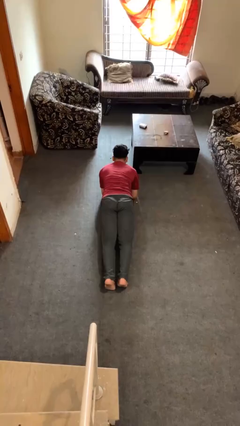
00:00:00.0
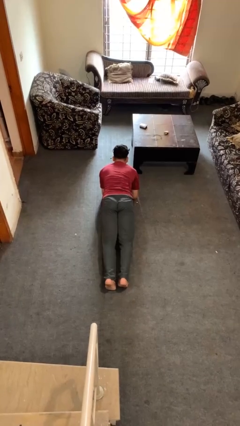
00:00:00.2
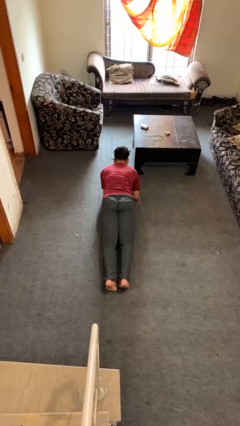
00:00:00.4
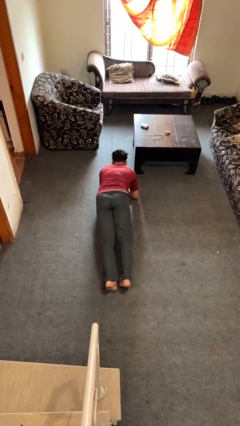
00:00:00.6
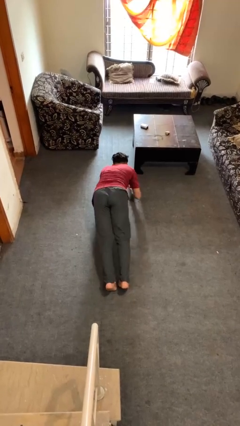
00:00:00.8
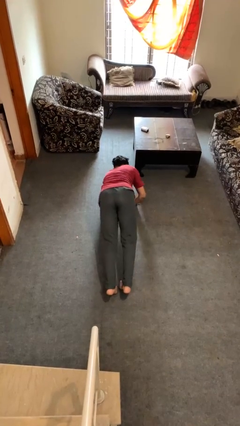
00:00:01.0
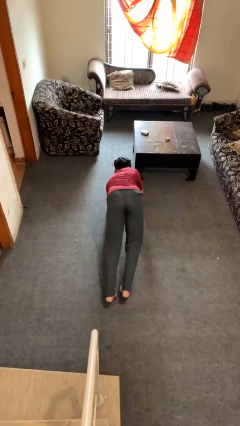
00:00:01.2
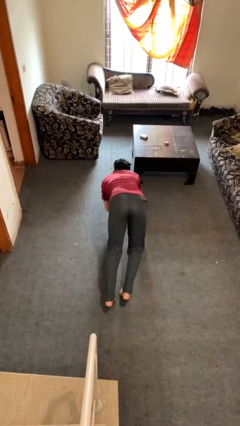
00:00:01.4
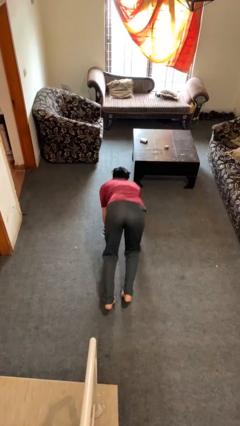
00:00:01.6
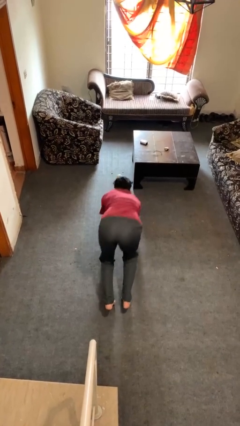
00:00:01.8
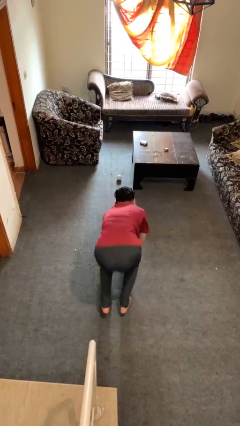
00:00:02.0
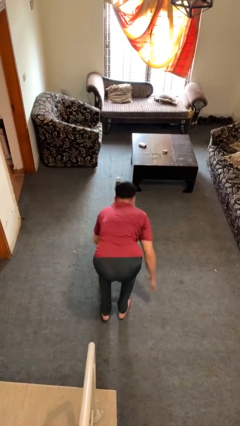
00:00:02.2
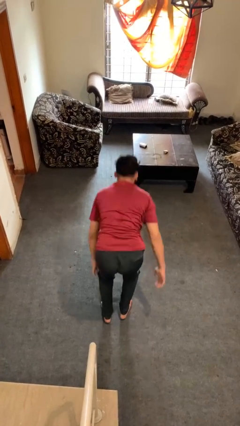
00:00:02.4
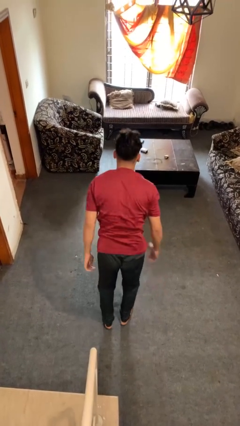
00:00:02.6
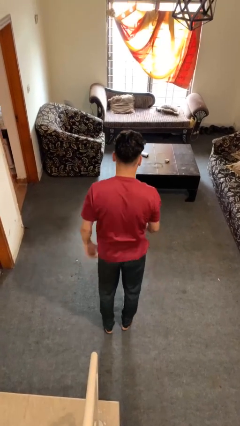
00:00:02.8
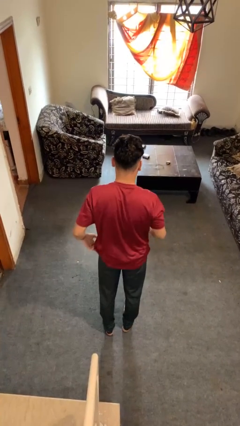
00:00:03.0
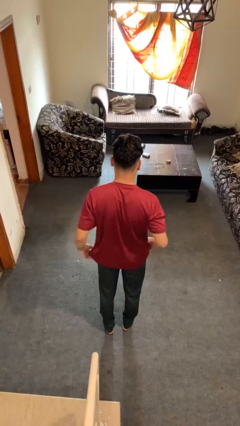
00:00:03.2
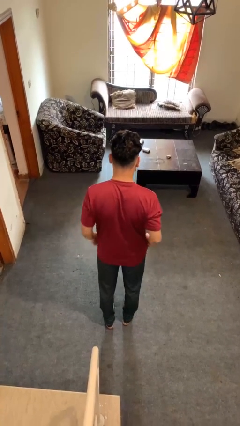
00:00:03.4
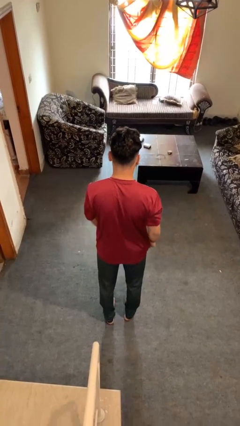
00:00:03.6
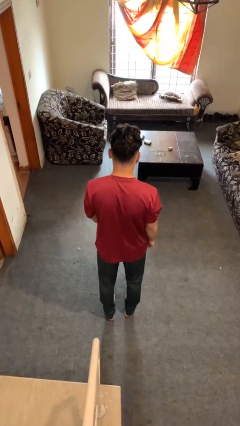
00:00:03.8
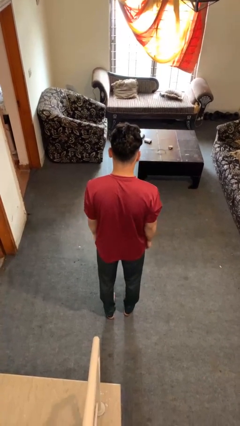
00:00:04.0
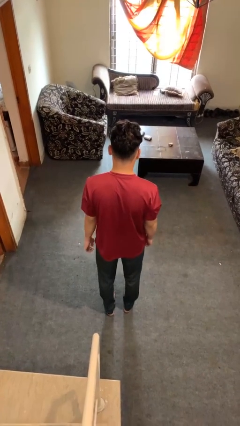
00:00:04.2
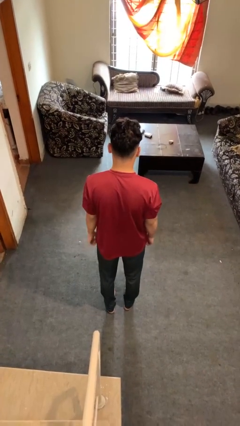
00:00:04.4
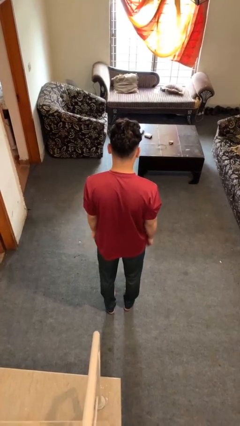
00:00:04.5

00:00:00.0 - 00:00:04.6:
person stands up from floor

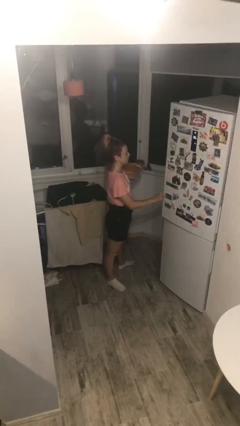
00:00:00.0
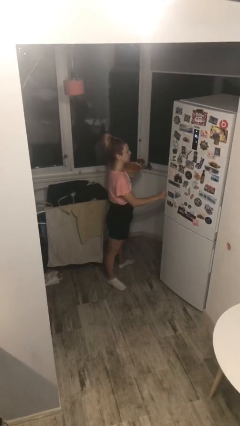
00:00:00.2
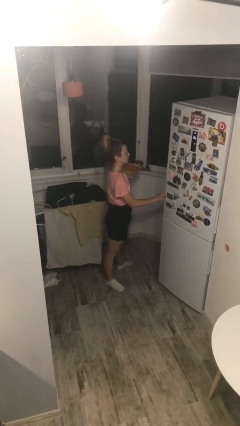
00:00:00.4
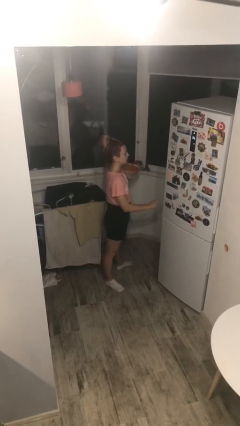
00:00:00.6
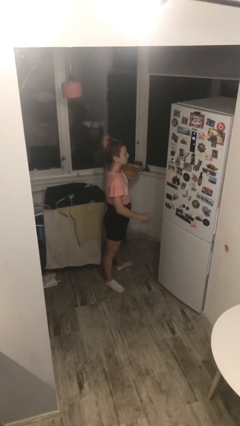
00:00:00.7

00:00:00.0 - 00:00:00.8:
person closes refrigerator

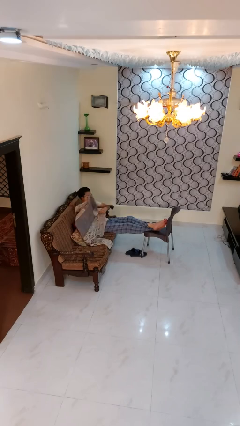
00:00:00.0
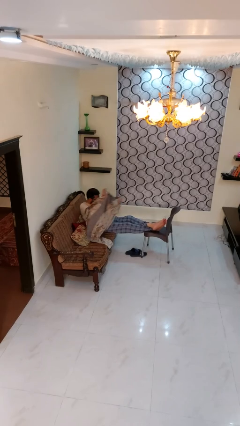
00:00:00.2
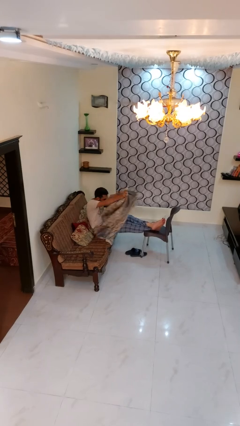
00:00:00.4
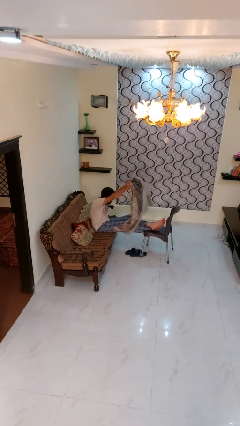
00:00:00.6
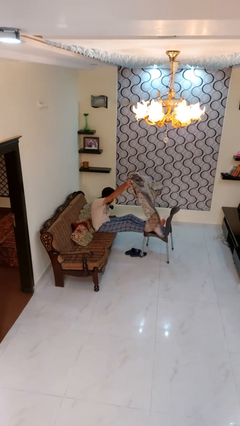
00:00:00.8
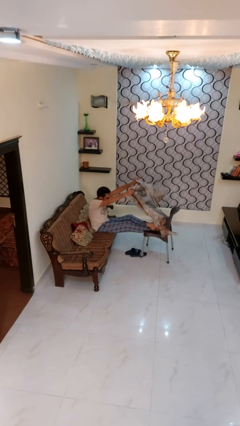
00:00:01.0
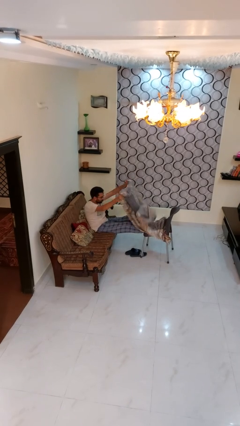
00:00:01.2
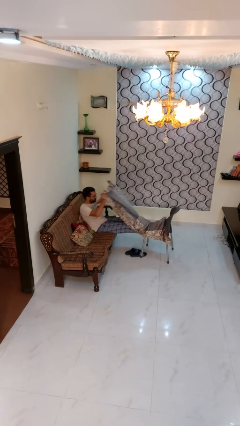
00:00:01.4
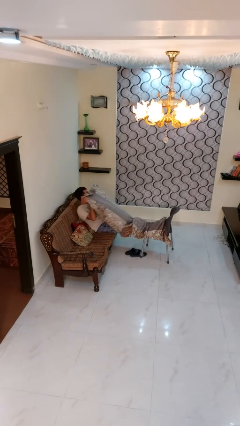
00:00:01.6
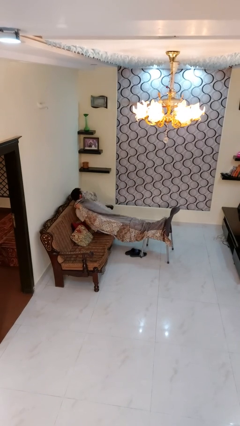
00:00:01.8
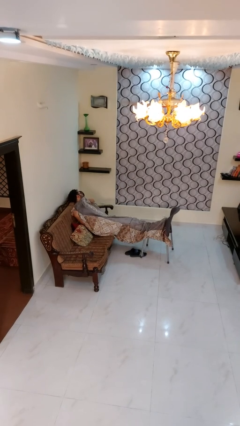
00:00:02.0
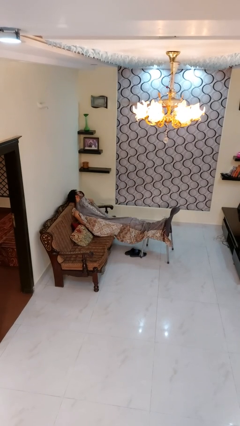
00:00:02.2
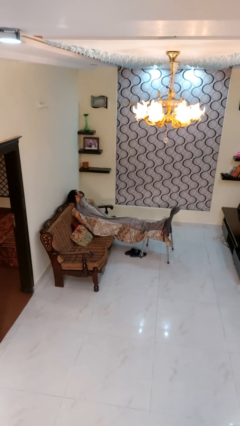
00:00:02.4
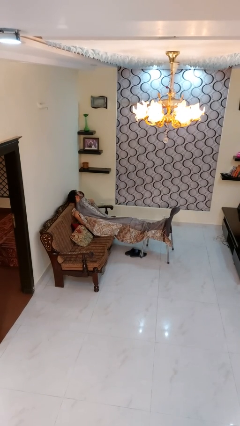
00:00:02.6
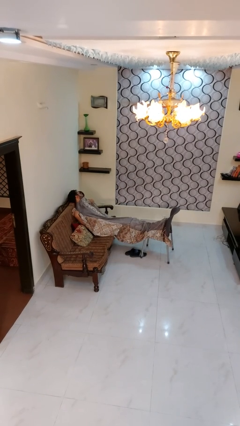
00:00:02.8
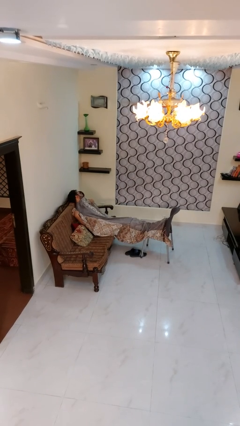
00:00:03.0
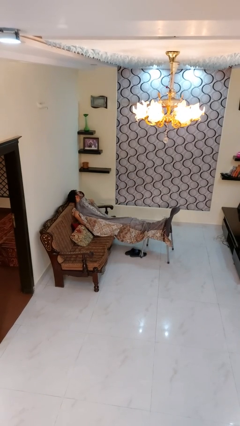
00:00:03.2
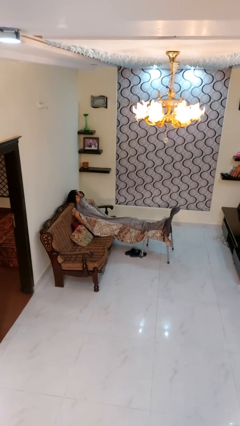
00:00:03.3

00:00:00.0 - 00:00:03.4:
person covers with blanket

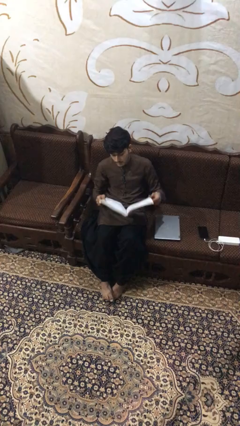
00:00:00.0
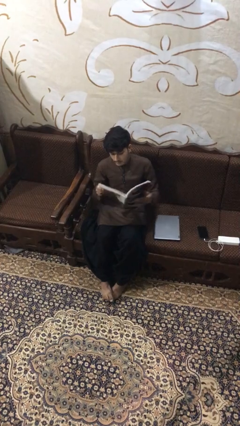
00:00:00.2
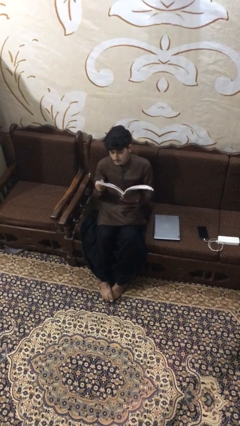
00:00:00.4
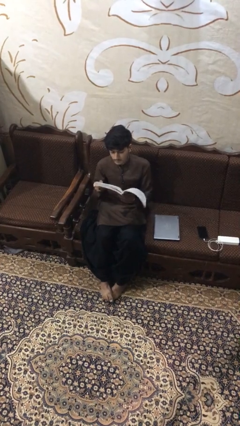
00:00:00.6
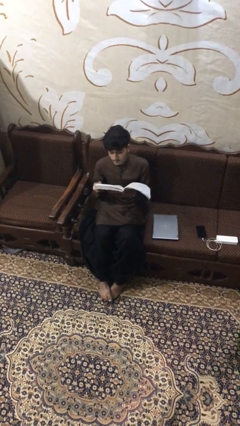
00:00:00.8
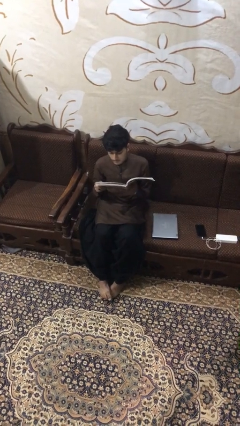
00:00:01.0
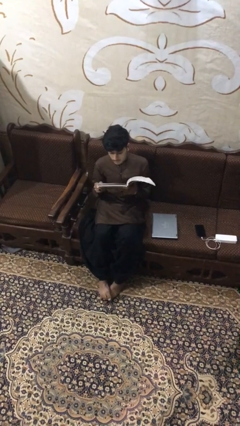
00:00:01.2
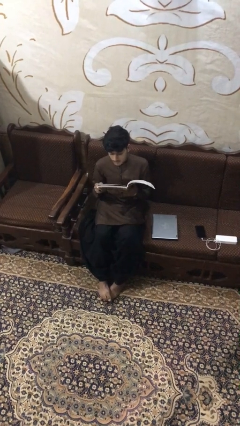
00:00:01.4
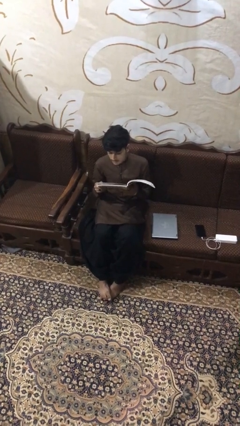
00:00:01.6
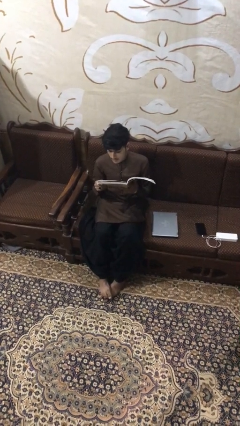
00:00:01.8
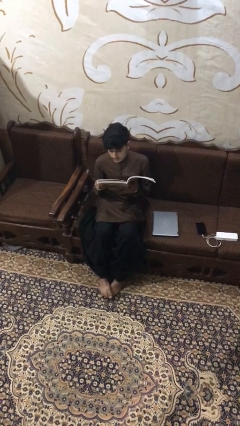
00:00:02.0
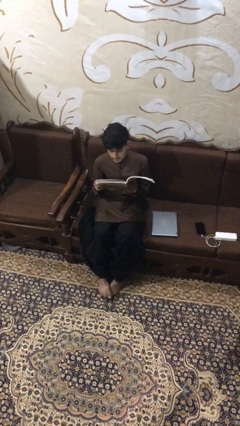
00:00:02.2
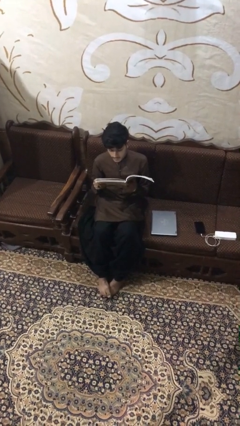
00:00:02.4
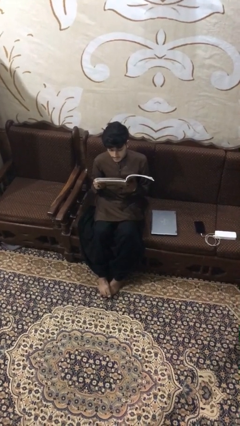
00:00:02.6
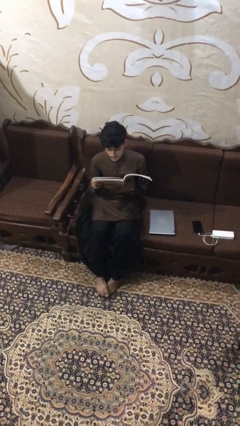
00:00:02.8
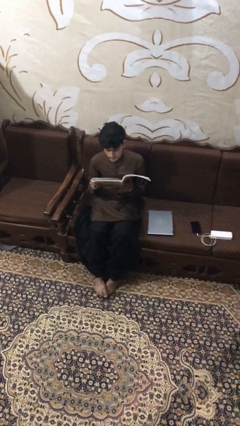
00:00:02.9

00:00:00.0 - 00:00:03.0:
person reads document

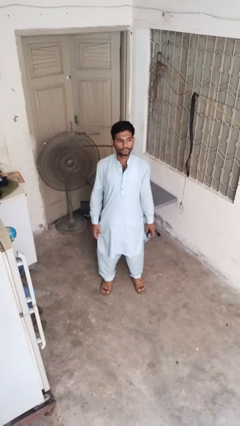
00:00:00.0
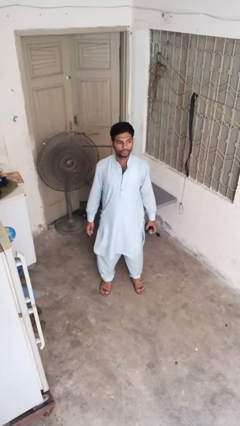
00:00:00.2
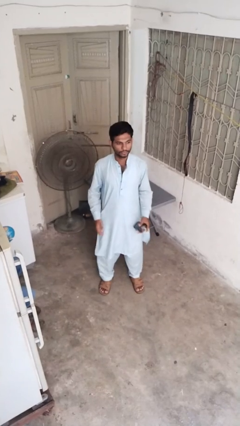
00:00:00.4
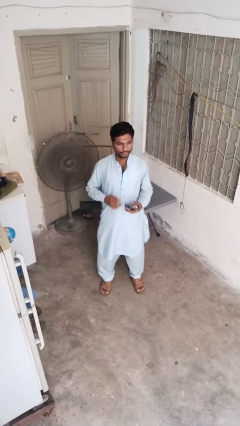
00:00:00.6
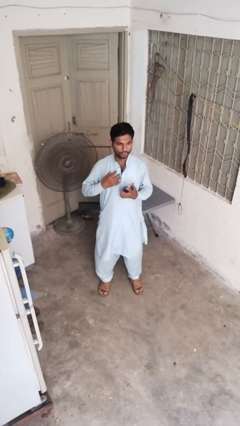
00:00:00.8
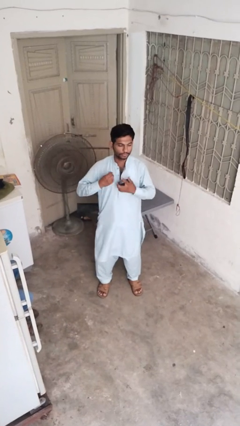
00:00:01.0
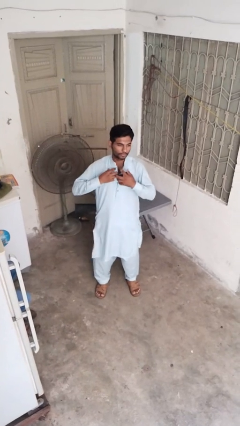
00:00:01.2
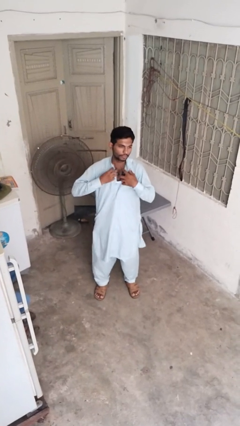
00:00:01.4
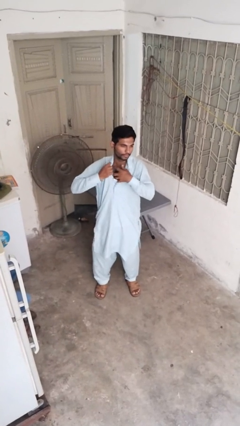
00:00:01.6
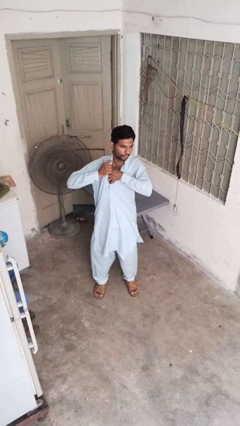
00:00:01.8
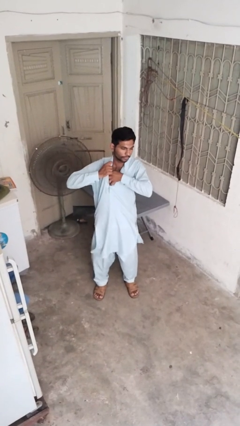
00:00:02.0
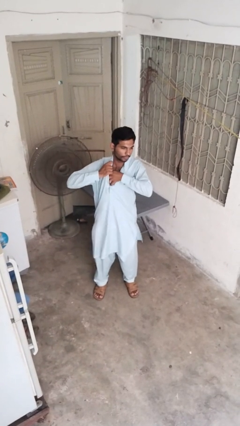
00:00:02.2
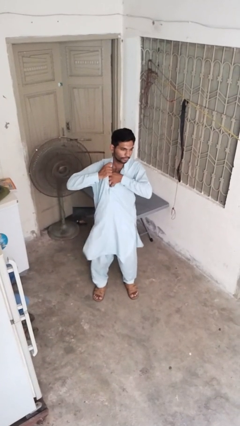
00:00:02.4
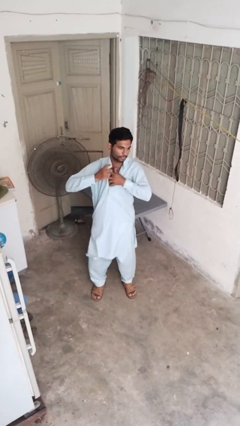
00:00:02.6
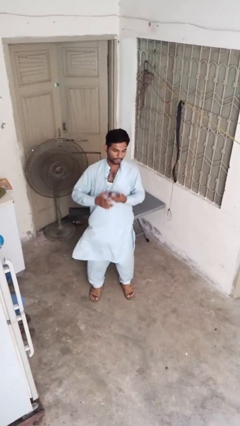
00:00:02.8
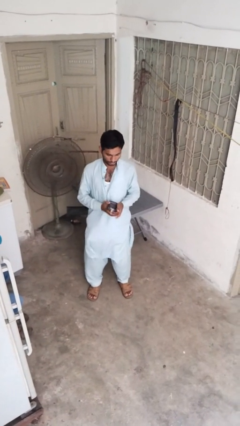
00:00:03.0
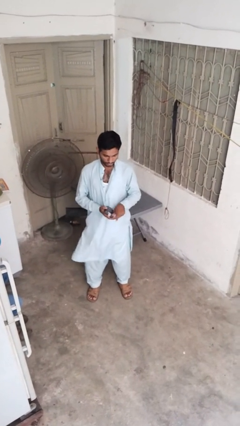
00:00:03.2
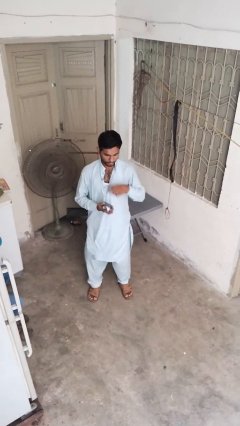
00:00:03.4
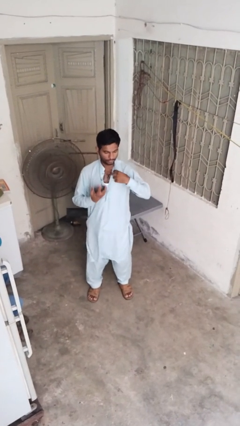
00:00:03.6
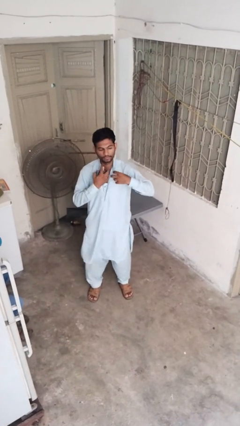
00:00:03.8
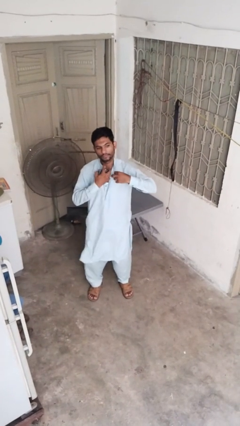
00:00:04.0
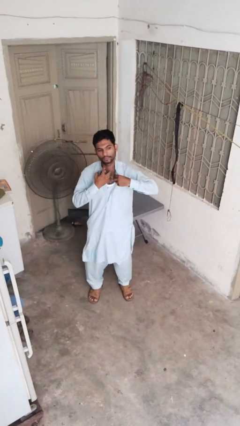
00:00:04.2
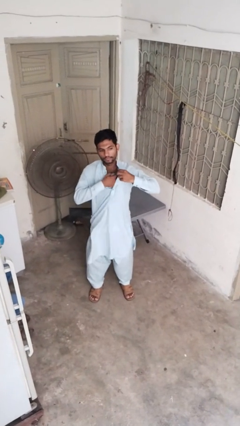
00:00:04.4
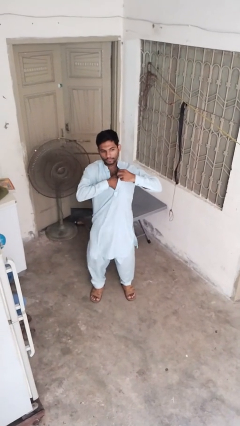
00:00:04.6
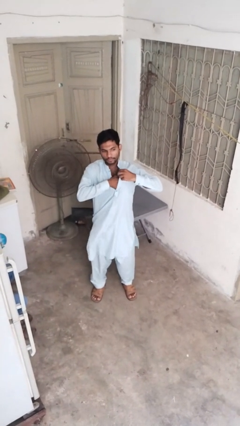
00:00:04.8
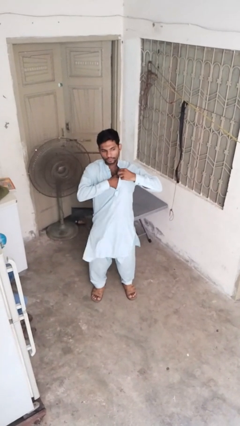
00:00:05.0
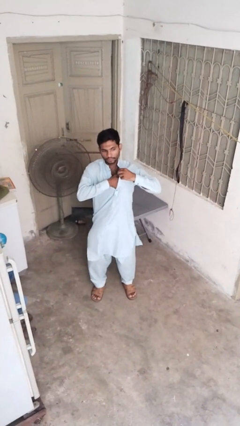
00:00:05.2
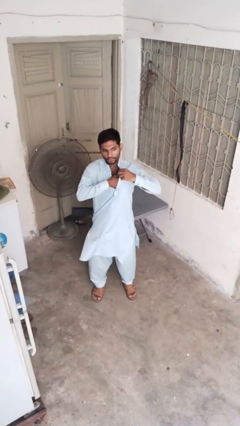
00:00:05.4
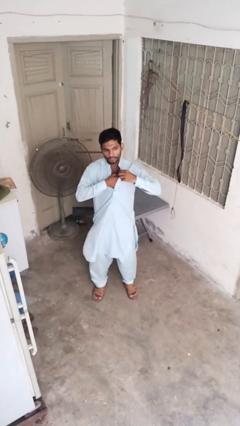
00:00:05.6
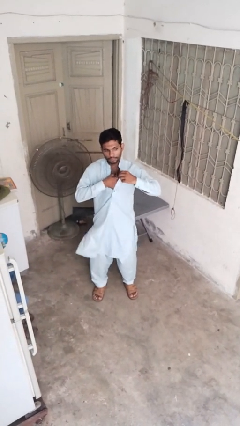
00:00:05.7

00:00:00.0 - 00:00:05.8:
person applies deodorant

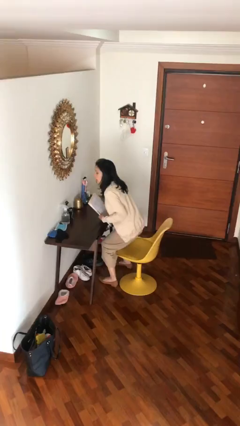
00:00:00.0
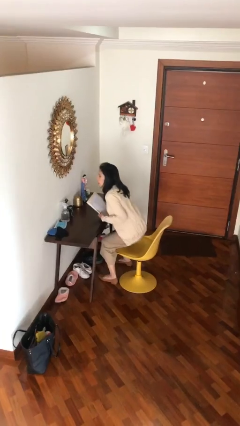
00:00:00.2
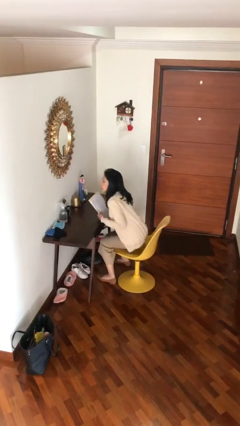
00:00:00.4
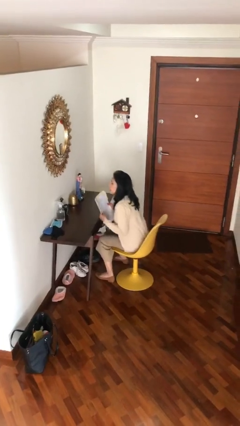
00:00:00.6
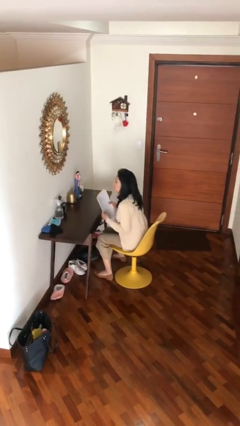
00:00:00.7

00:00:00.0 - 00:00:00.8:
person sits down
